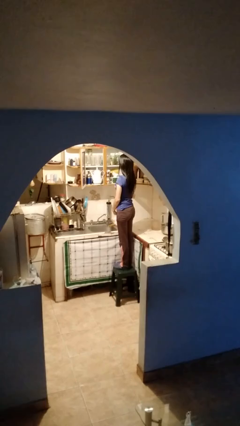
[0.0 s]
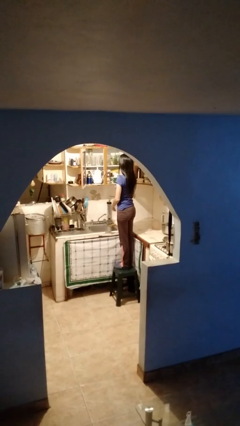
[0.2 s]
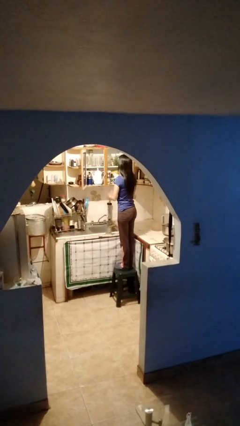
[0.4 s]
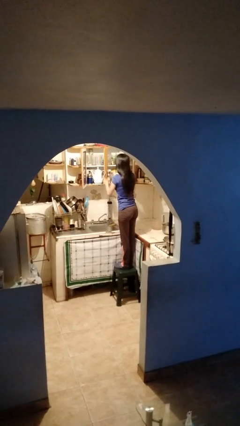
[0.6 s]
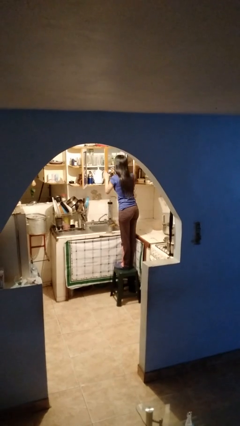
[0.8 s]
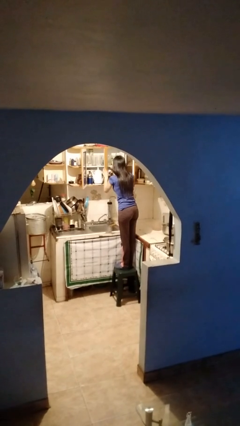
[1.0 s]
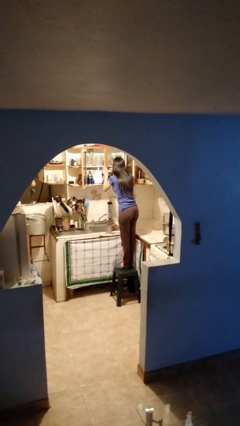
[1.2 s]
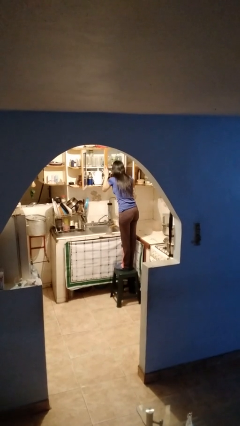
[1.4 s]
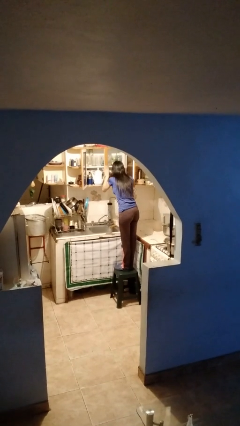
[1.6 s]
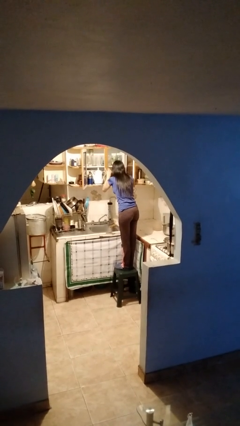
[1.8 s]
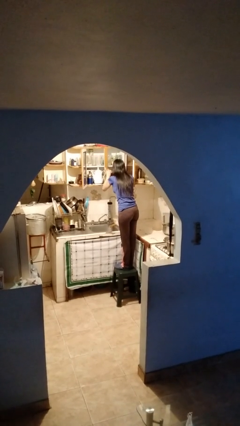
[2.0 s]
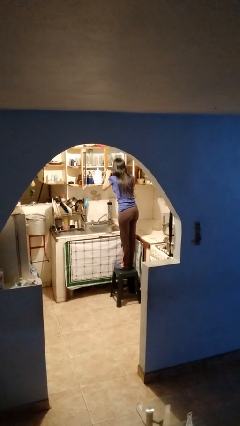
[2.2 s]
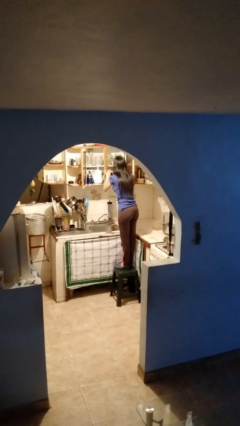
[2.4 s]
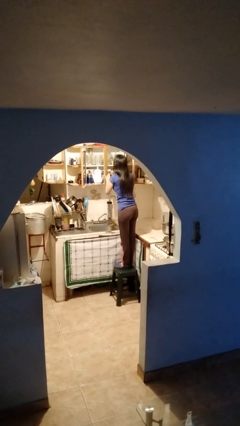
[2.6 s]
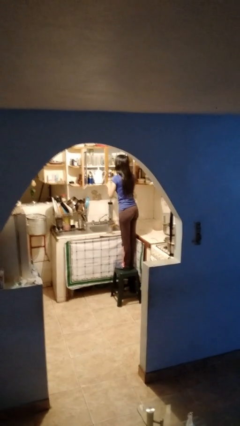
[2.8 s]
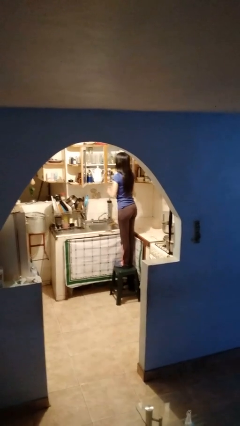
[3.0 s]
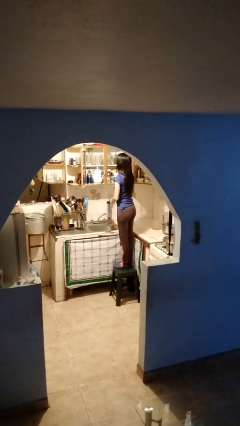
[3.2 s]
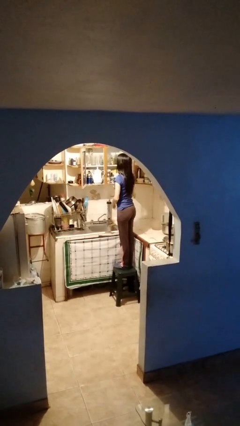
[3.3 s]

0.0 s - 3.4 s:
person searches in cabinet

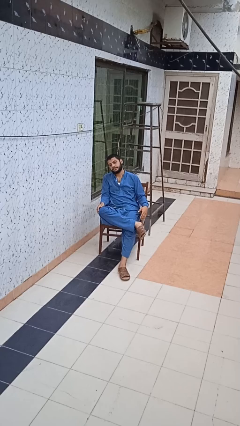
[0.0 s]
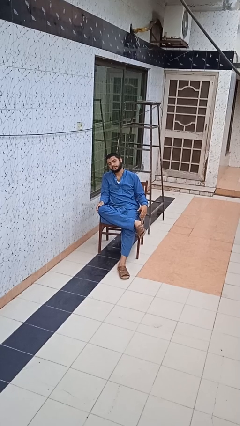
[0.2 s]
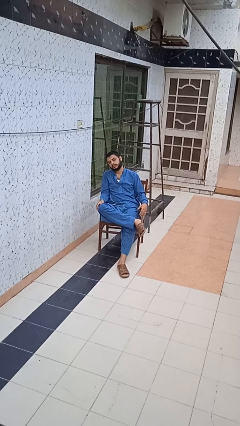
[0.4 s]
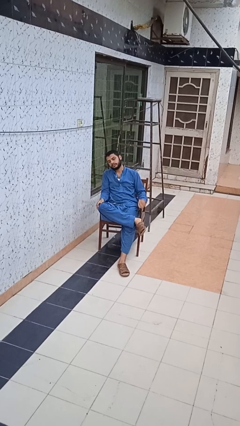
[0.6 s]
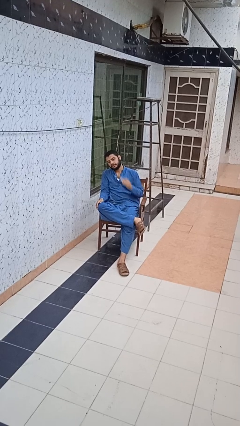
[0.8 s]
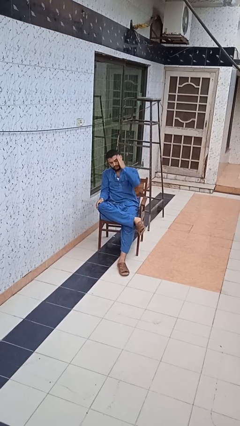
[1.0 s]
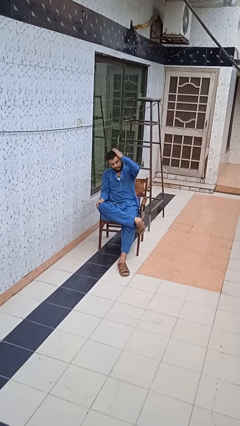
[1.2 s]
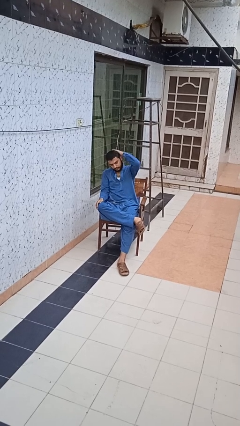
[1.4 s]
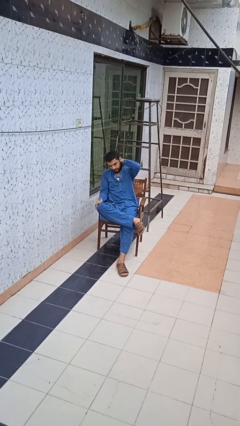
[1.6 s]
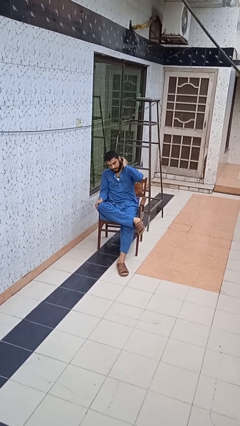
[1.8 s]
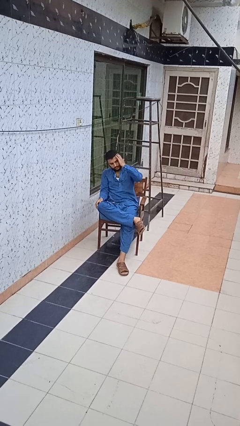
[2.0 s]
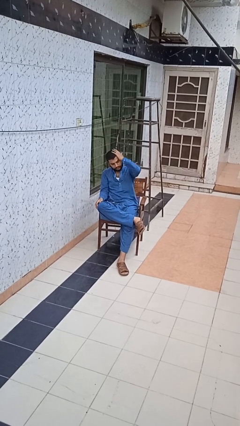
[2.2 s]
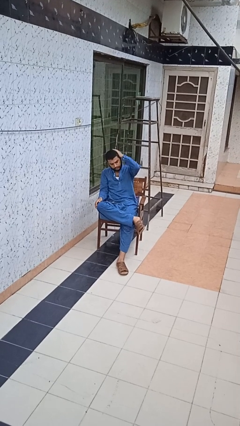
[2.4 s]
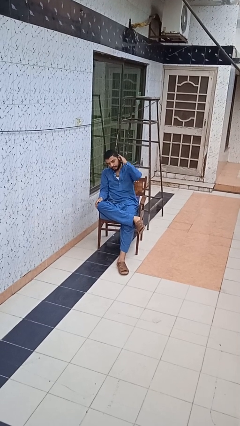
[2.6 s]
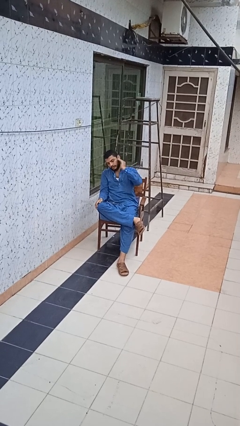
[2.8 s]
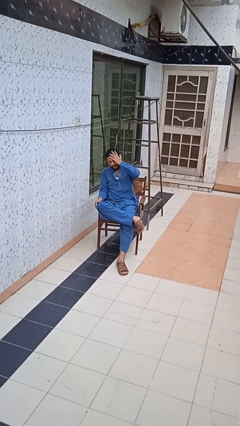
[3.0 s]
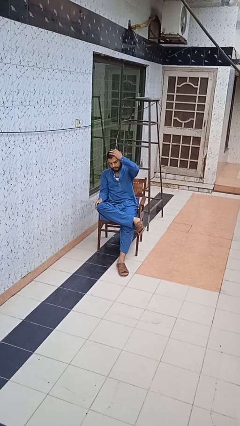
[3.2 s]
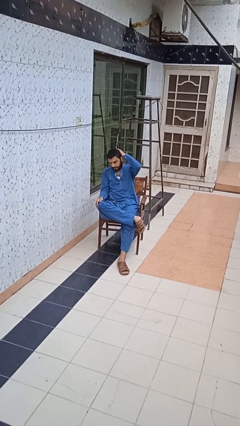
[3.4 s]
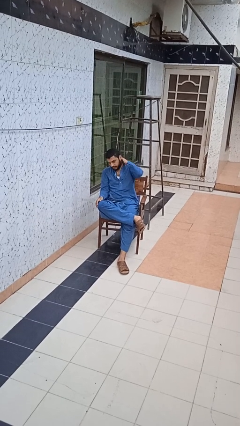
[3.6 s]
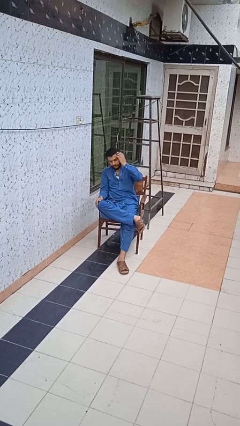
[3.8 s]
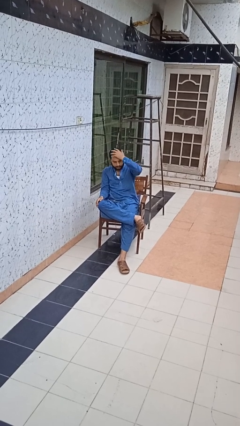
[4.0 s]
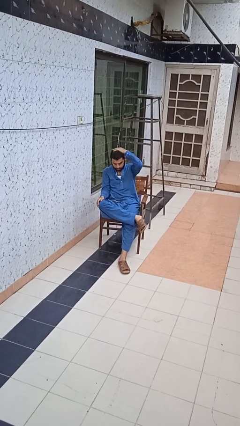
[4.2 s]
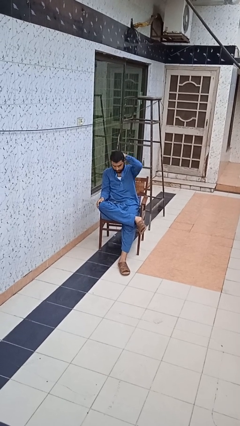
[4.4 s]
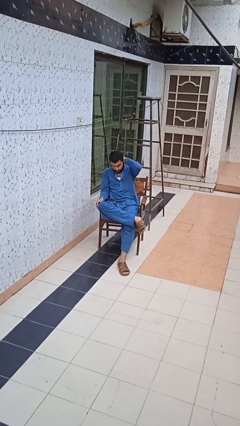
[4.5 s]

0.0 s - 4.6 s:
person strokes hair

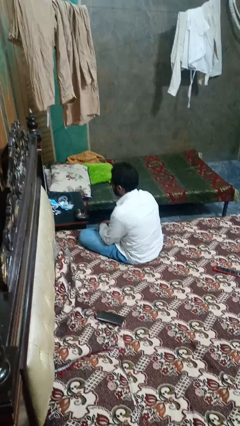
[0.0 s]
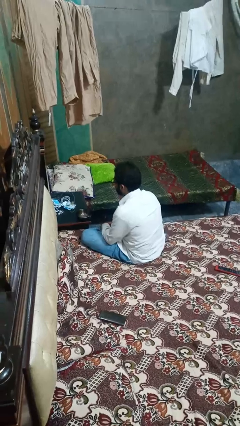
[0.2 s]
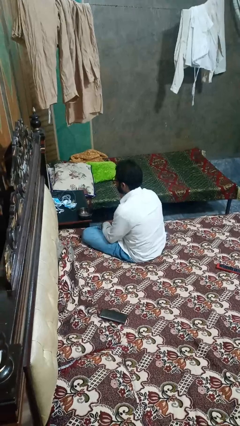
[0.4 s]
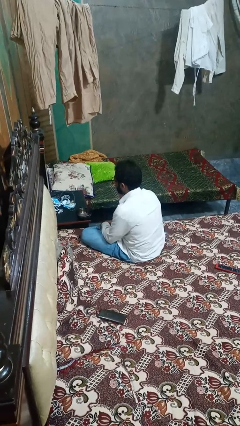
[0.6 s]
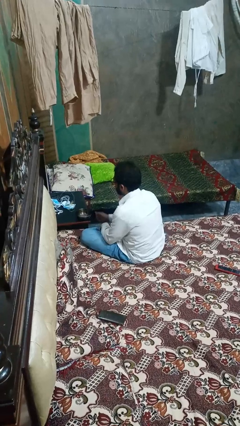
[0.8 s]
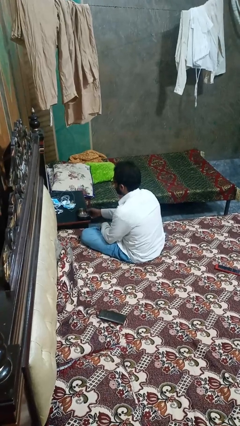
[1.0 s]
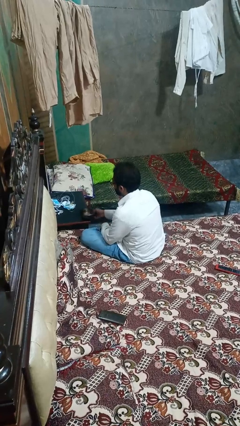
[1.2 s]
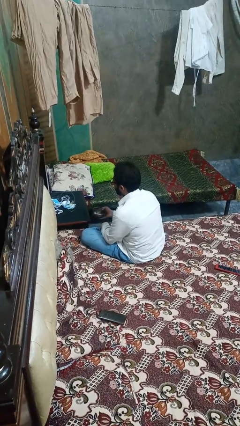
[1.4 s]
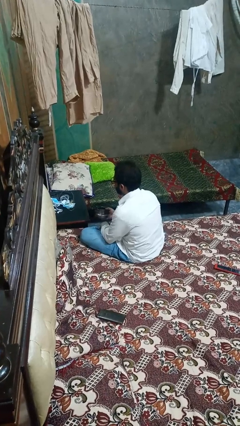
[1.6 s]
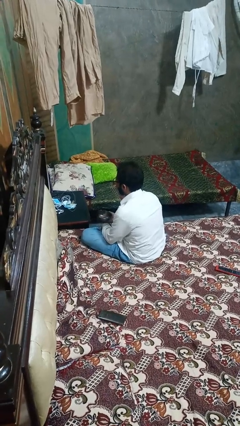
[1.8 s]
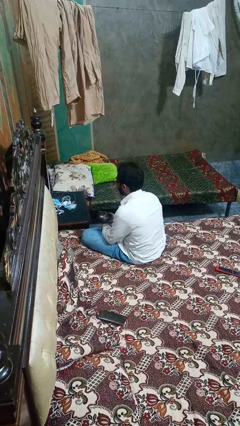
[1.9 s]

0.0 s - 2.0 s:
person picks up object from table

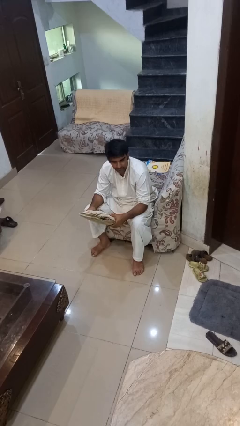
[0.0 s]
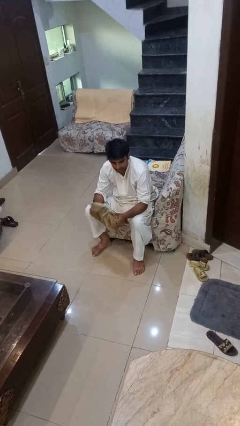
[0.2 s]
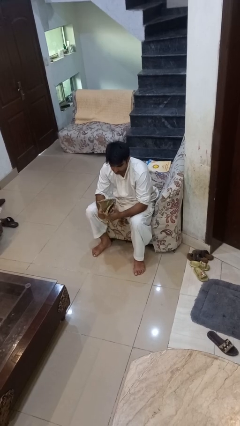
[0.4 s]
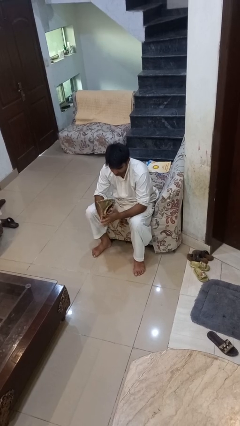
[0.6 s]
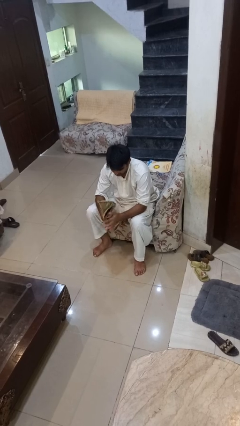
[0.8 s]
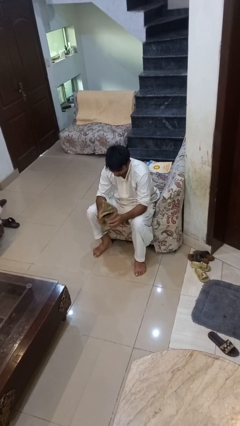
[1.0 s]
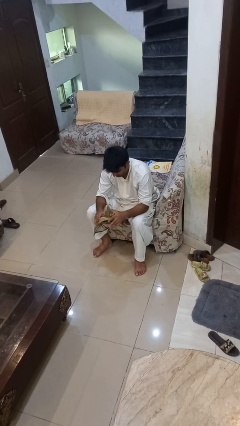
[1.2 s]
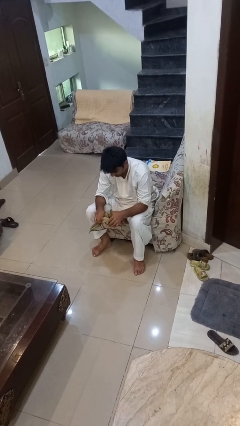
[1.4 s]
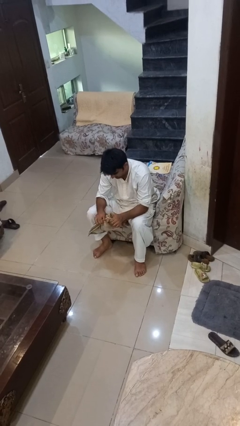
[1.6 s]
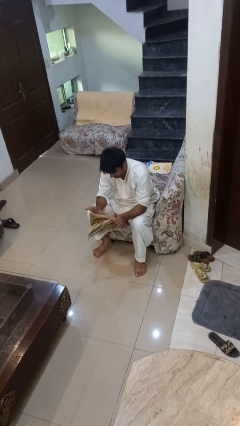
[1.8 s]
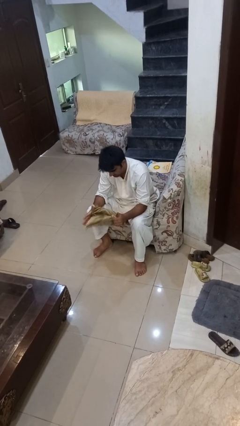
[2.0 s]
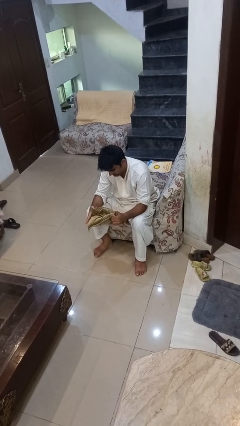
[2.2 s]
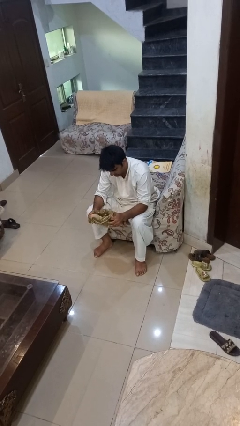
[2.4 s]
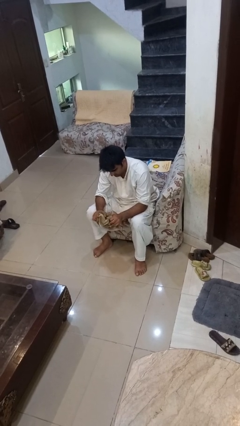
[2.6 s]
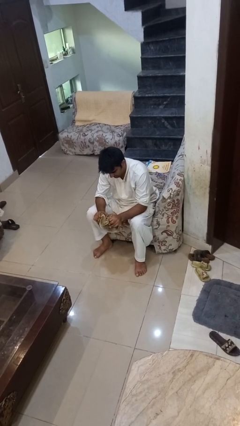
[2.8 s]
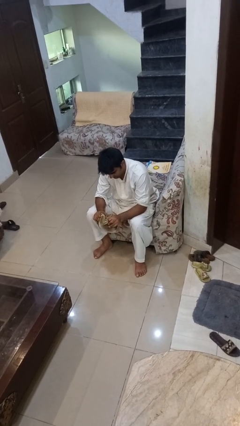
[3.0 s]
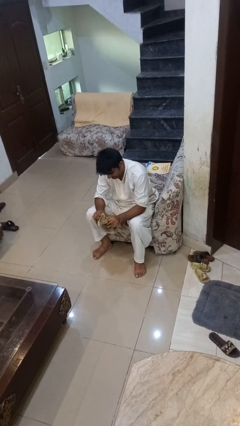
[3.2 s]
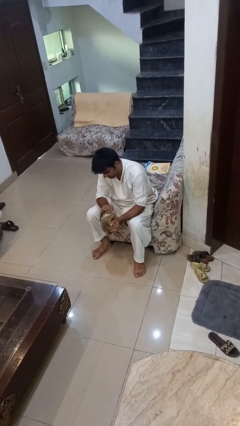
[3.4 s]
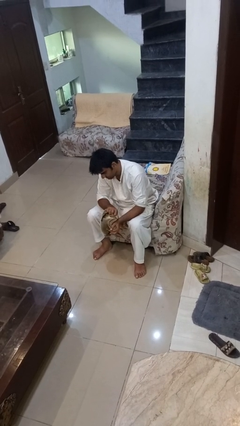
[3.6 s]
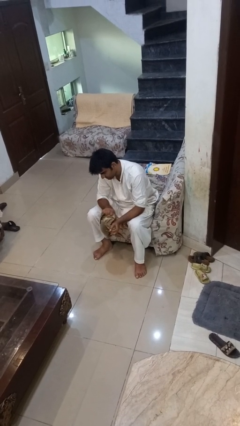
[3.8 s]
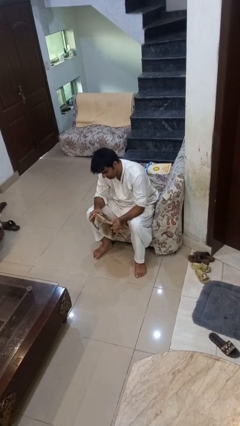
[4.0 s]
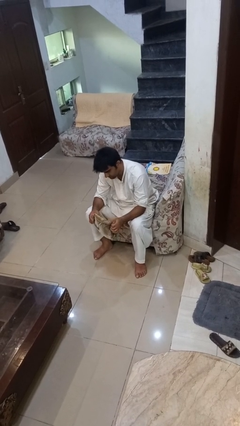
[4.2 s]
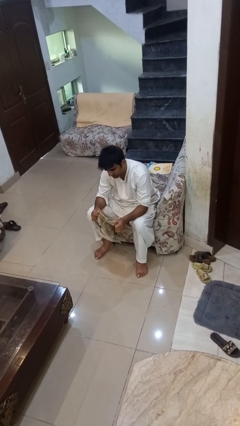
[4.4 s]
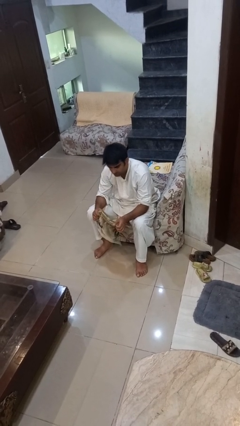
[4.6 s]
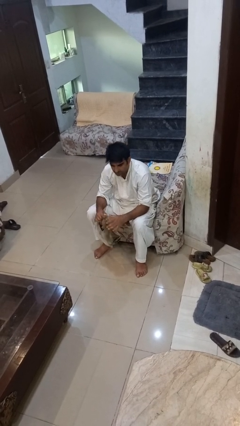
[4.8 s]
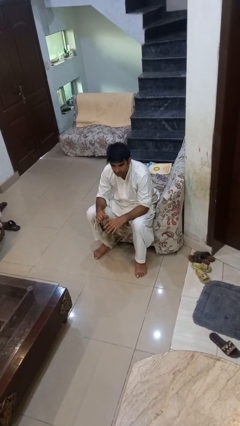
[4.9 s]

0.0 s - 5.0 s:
person squeezes object

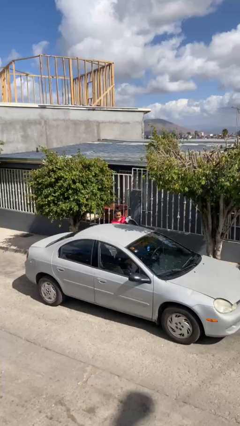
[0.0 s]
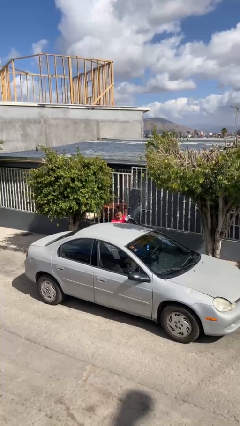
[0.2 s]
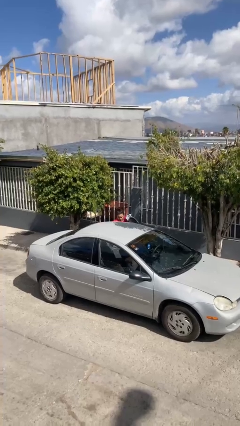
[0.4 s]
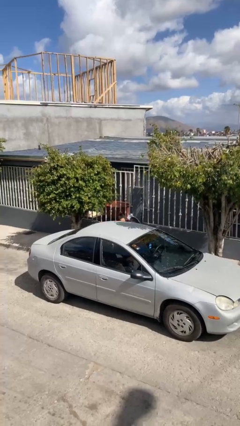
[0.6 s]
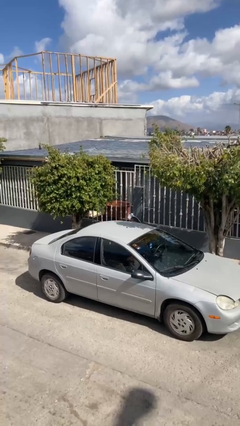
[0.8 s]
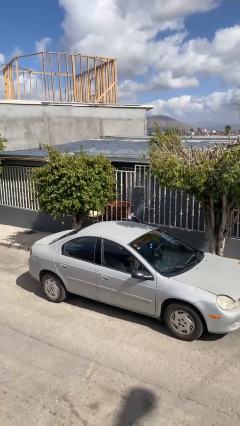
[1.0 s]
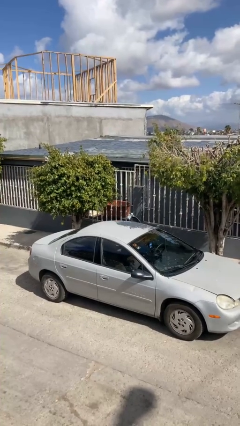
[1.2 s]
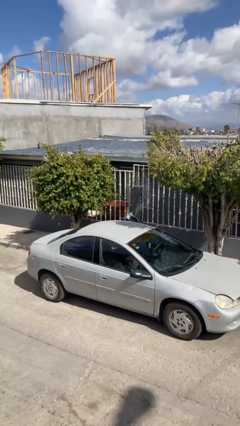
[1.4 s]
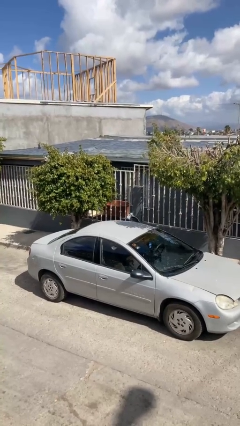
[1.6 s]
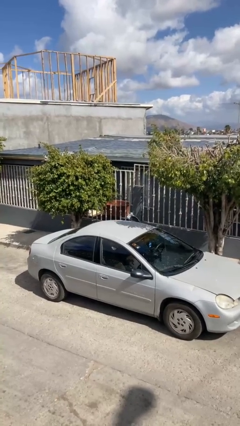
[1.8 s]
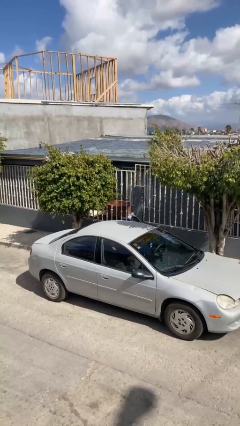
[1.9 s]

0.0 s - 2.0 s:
person enters car

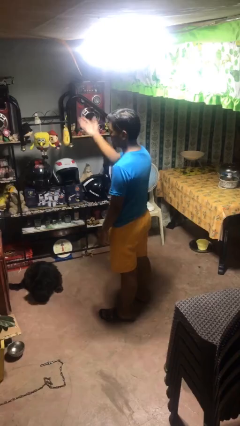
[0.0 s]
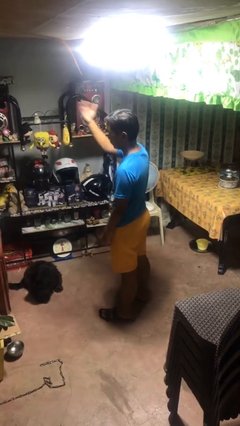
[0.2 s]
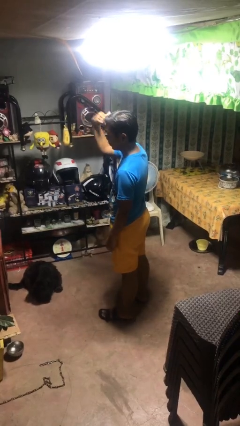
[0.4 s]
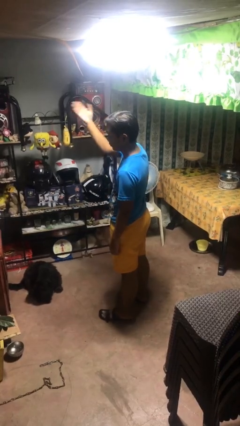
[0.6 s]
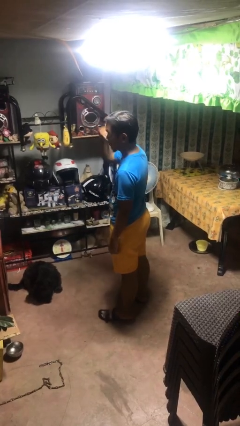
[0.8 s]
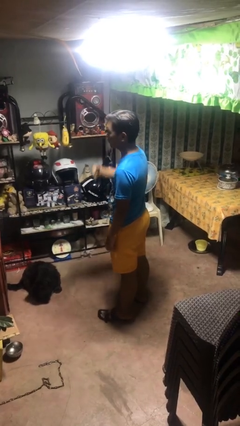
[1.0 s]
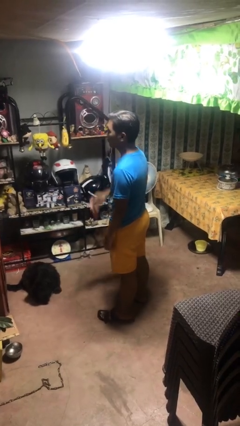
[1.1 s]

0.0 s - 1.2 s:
person gestures come here
